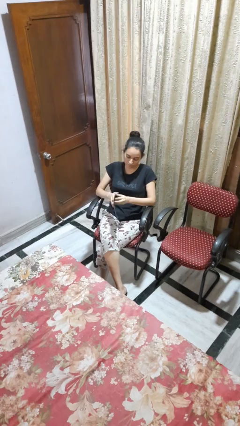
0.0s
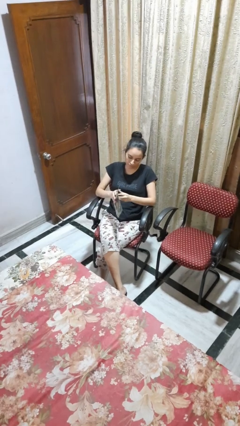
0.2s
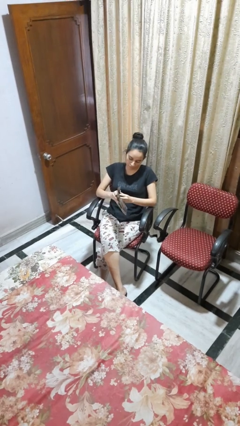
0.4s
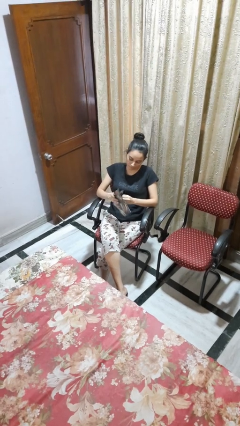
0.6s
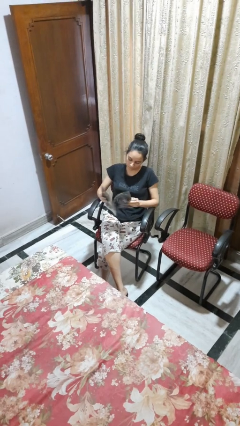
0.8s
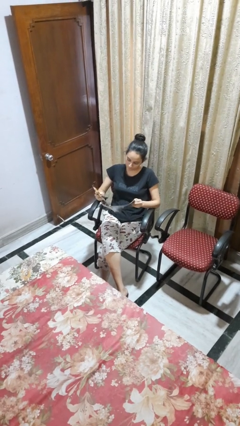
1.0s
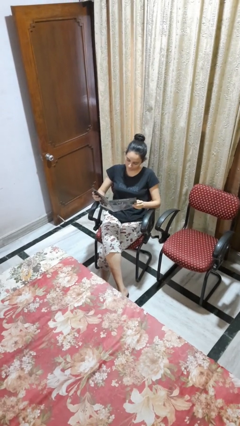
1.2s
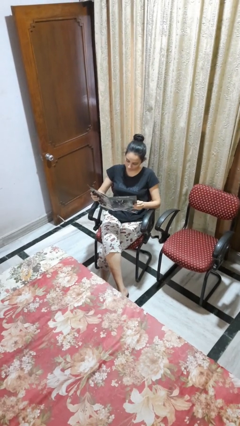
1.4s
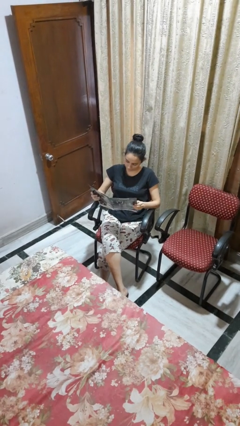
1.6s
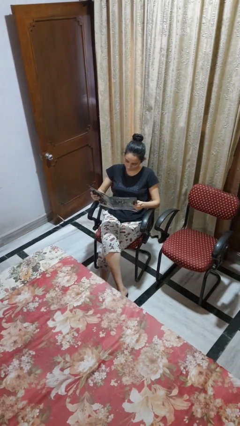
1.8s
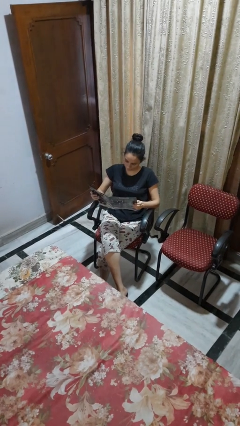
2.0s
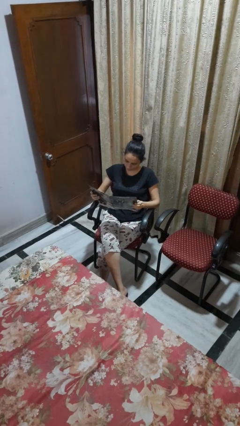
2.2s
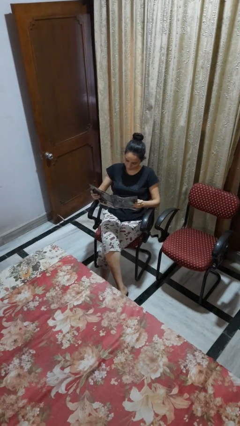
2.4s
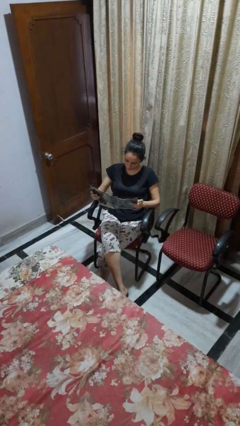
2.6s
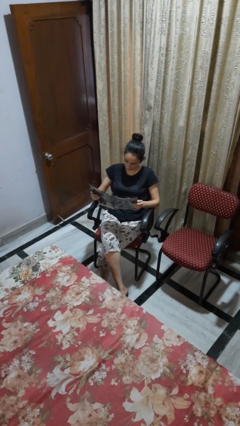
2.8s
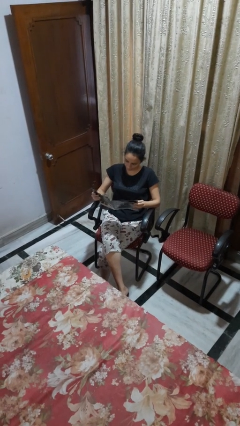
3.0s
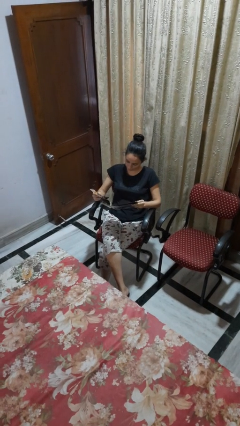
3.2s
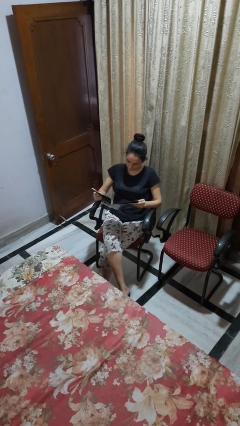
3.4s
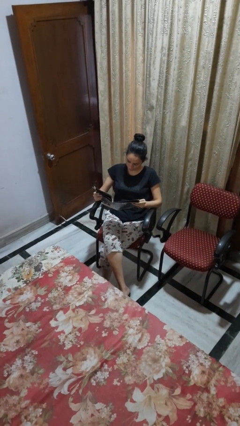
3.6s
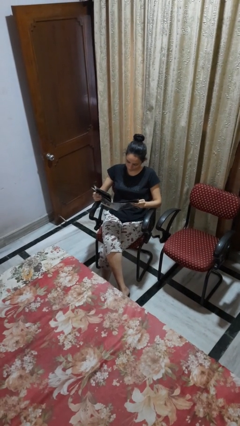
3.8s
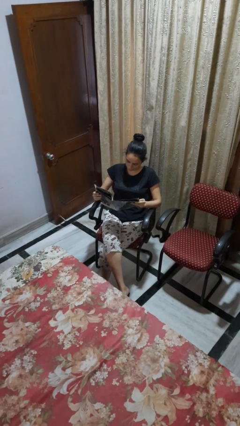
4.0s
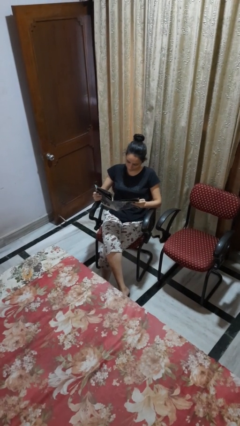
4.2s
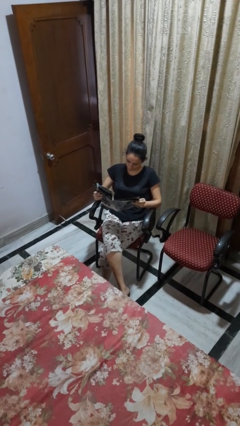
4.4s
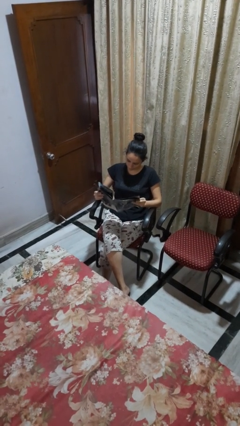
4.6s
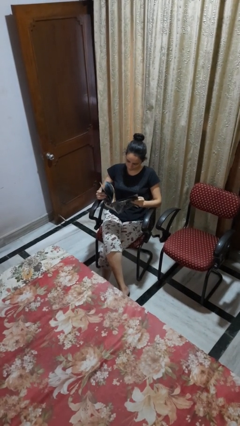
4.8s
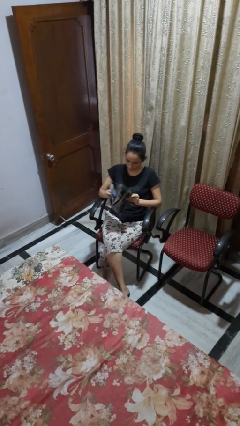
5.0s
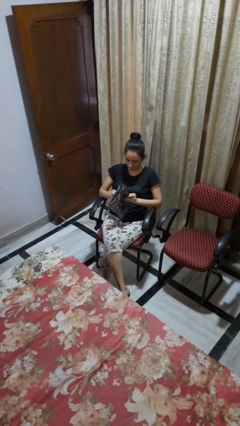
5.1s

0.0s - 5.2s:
person reads magazine

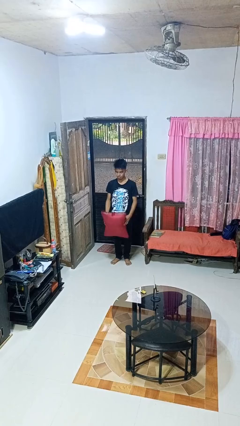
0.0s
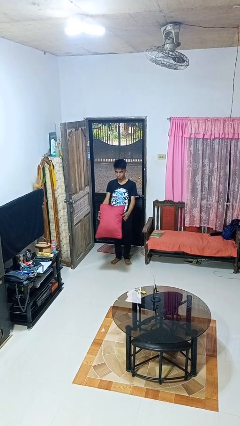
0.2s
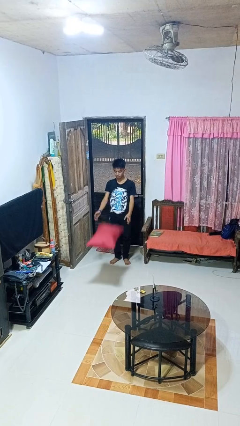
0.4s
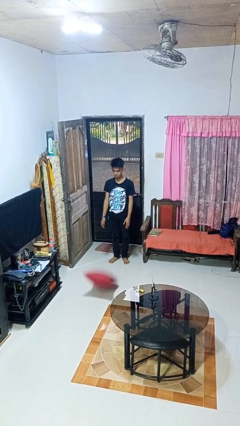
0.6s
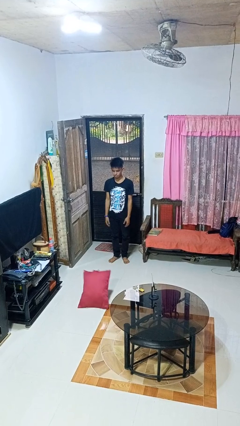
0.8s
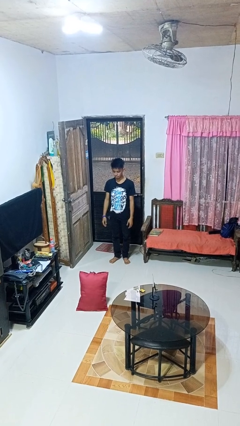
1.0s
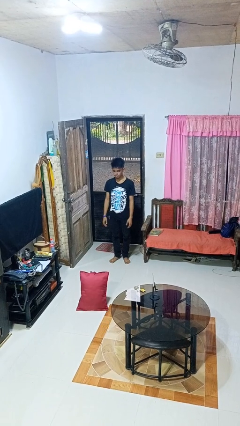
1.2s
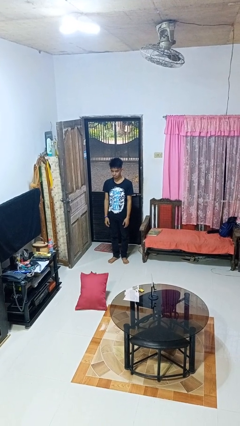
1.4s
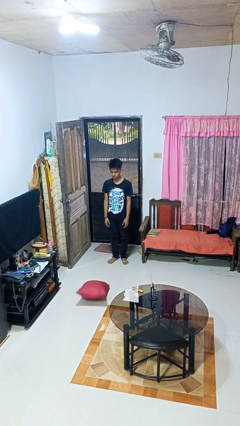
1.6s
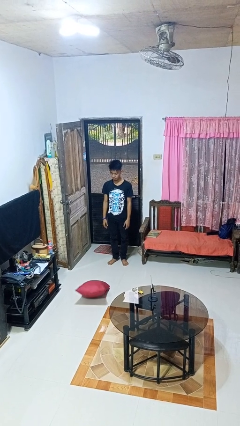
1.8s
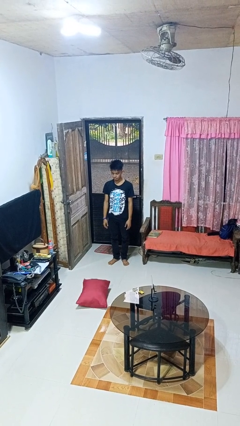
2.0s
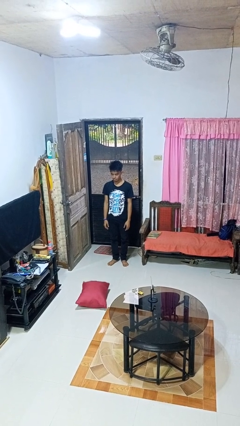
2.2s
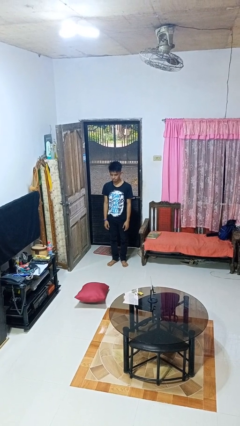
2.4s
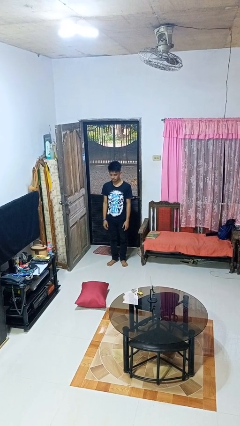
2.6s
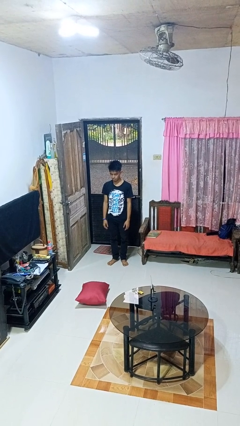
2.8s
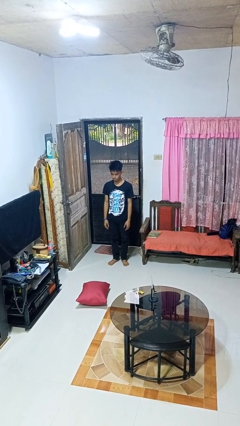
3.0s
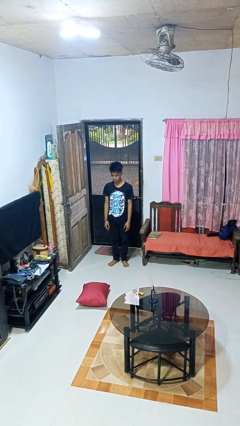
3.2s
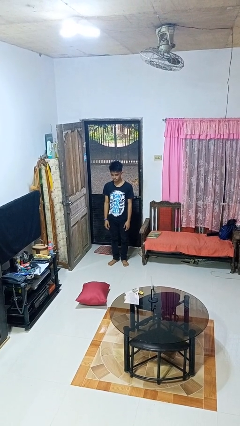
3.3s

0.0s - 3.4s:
person throws object to ground

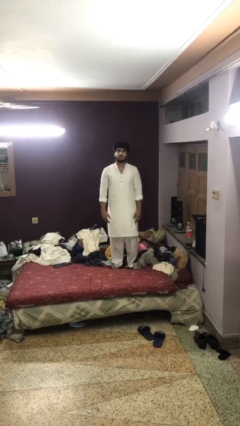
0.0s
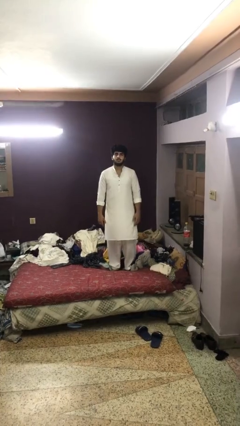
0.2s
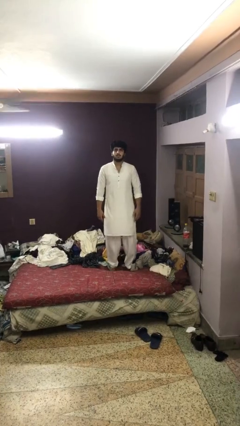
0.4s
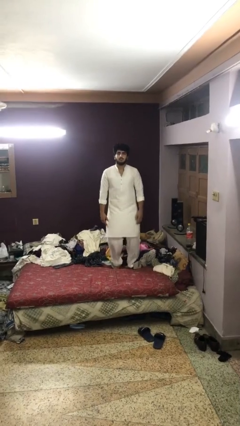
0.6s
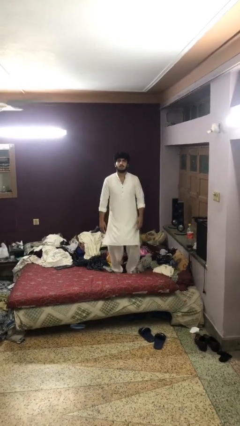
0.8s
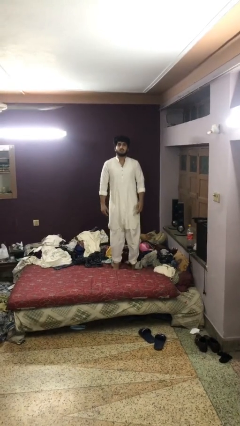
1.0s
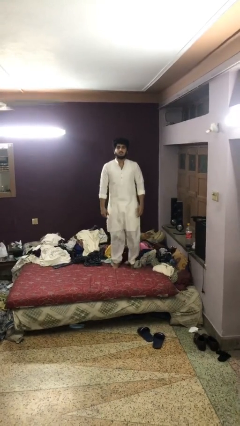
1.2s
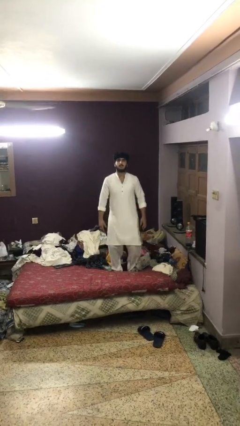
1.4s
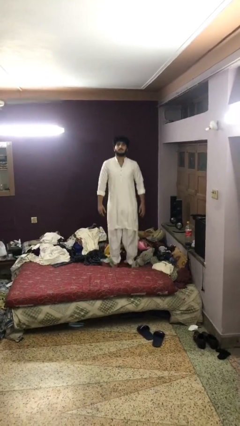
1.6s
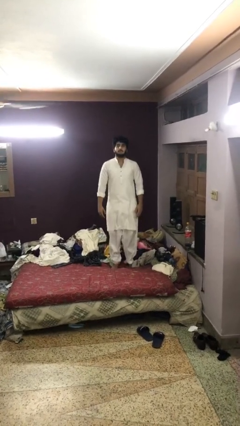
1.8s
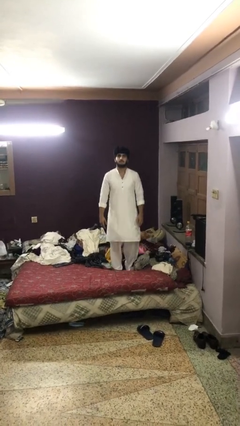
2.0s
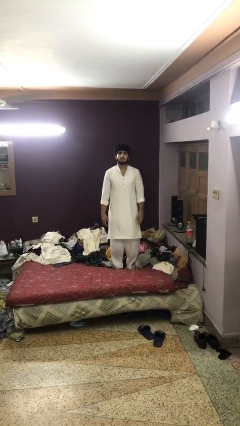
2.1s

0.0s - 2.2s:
person jumps on bed

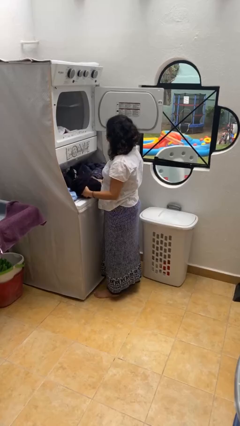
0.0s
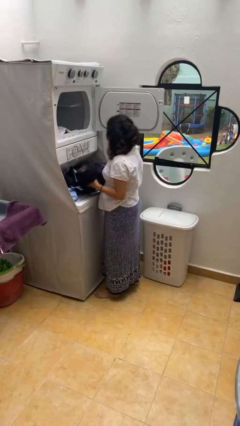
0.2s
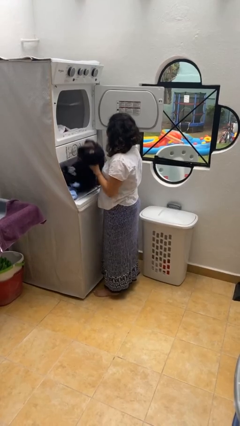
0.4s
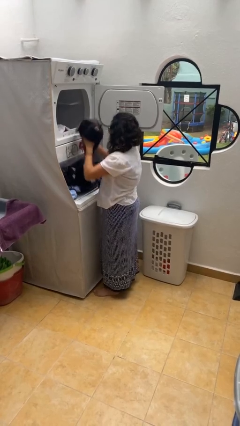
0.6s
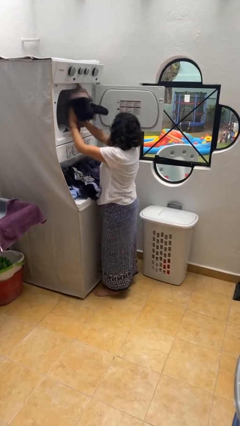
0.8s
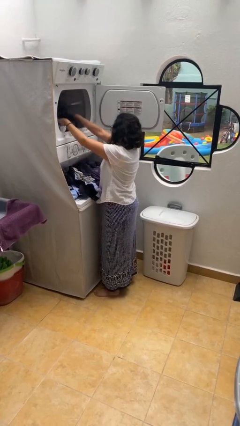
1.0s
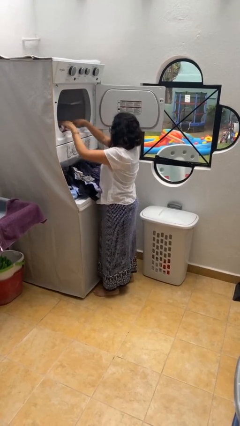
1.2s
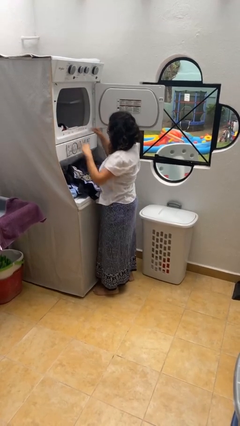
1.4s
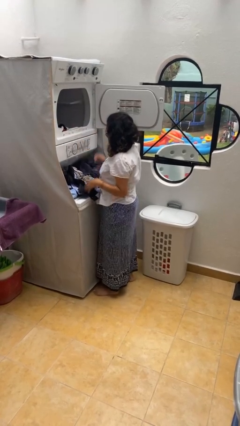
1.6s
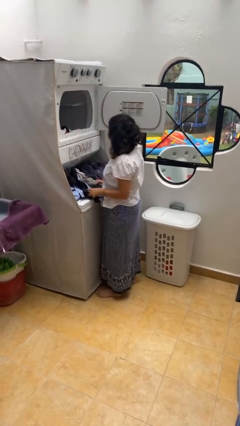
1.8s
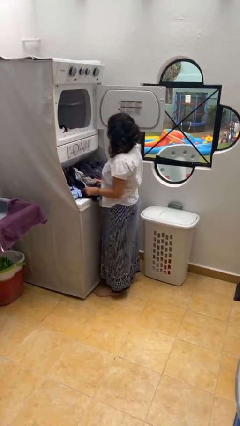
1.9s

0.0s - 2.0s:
person loads dryer

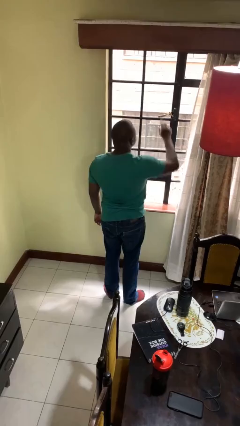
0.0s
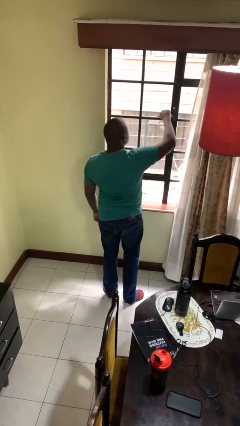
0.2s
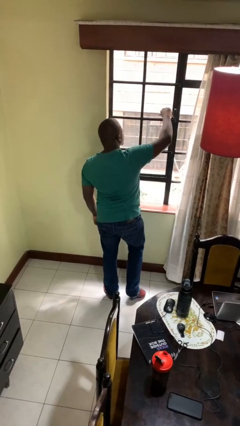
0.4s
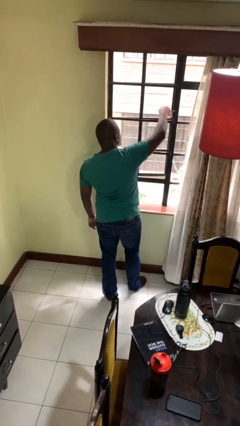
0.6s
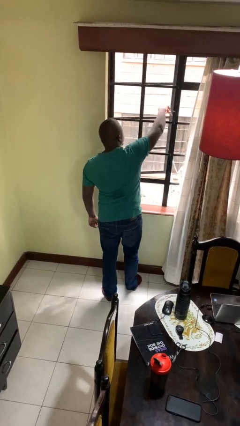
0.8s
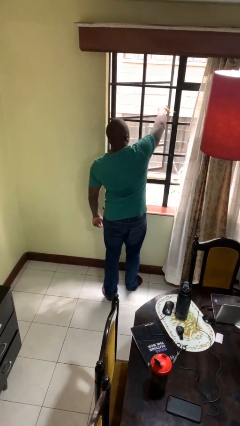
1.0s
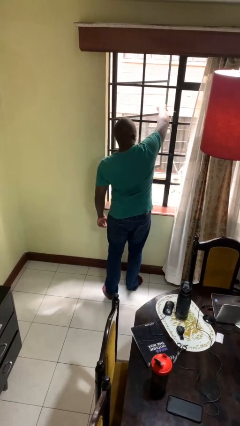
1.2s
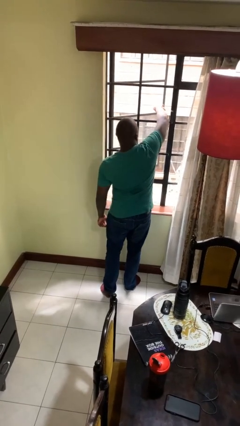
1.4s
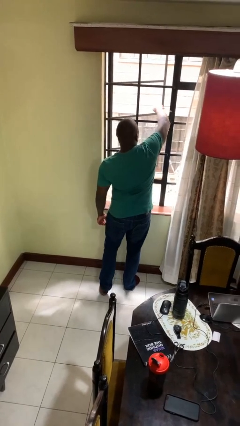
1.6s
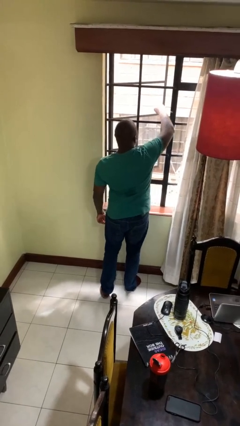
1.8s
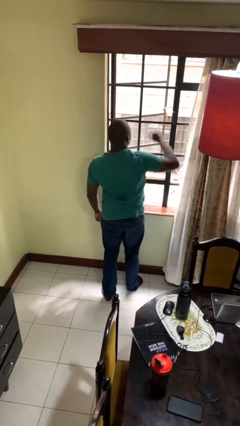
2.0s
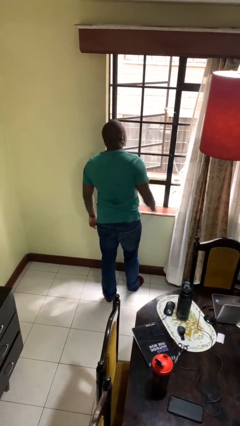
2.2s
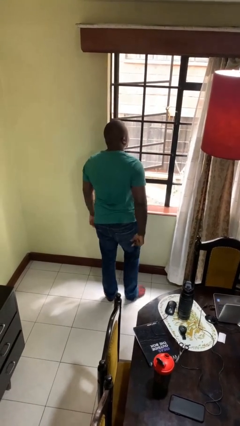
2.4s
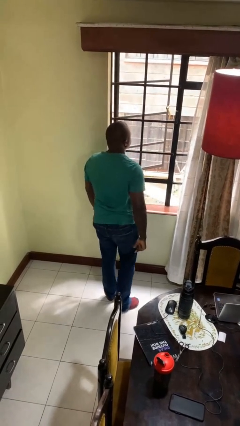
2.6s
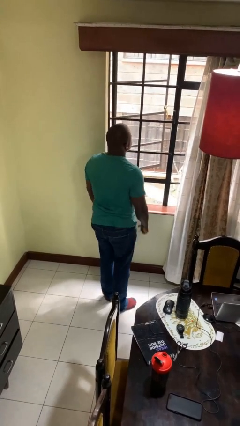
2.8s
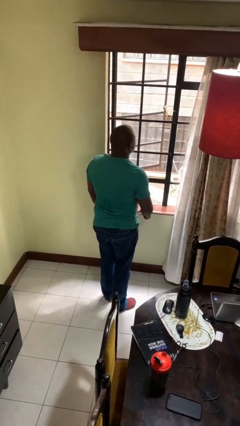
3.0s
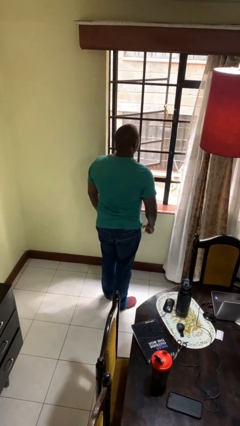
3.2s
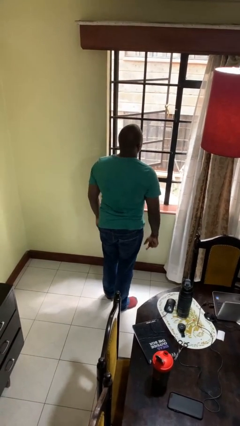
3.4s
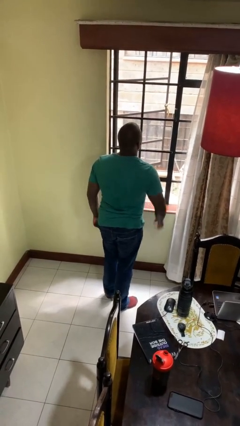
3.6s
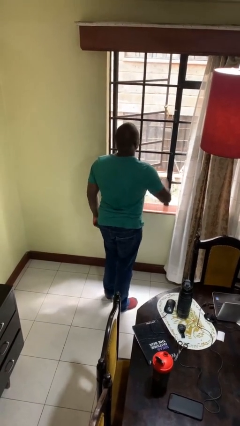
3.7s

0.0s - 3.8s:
person opens home window

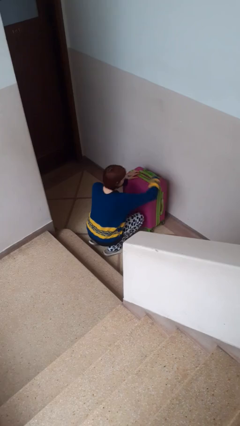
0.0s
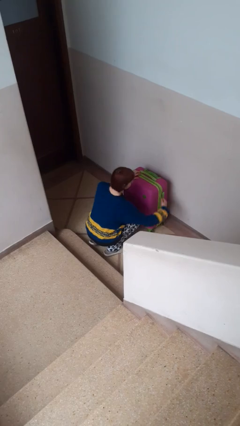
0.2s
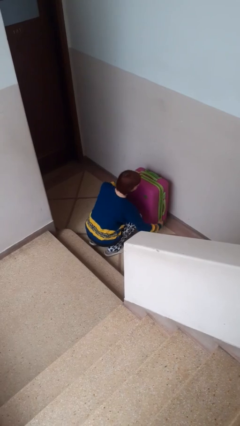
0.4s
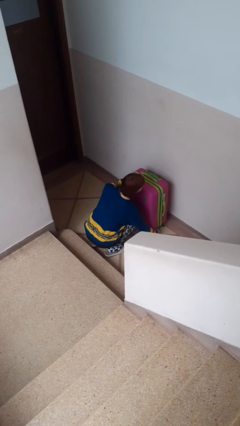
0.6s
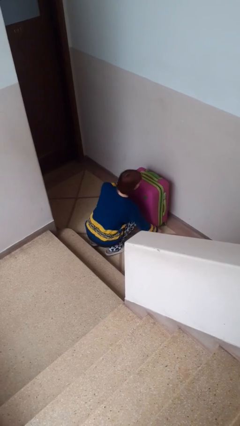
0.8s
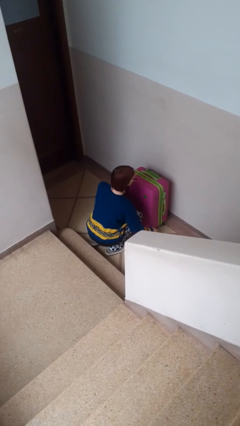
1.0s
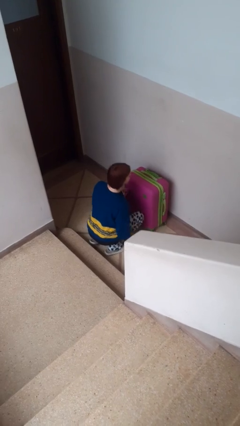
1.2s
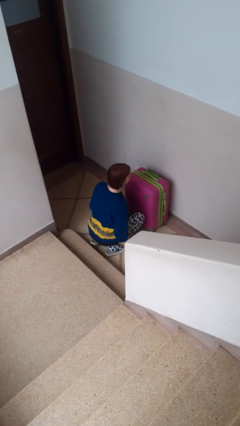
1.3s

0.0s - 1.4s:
person opens suitcase
